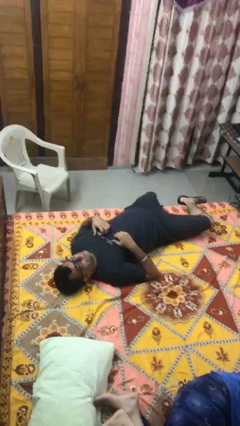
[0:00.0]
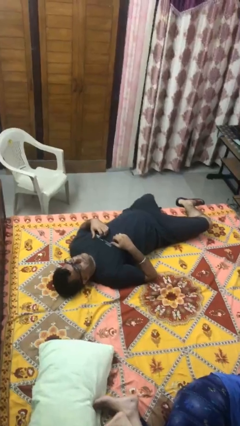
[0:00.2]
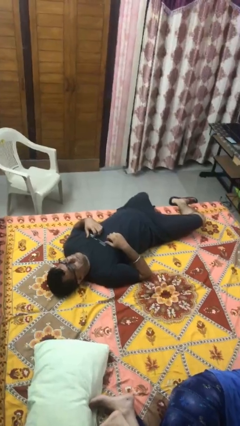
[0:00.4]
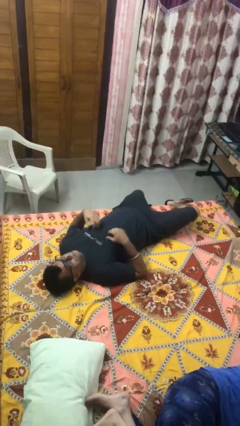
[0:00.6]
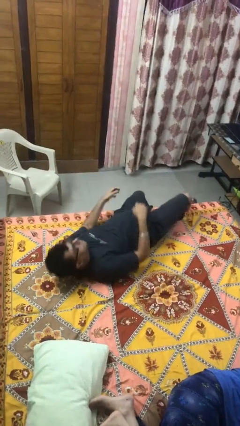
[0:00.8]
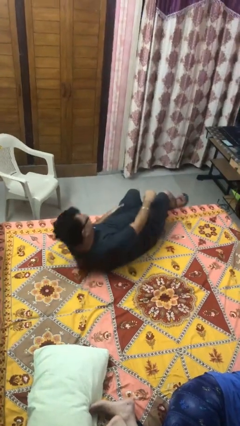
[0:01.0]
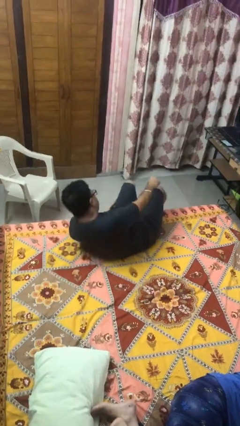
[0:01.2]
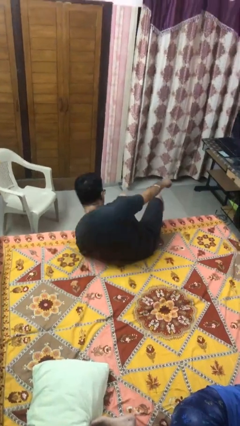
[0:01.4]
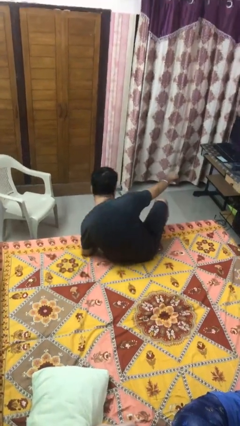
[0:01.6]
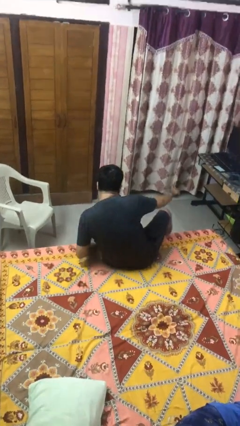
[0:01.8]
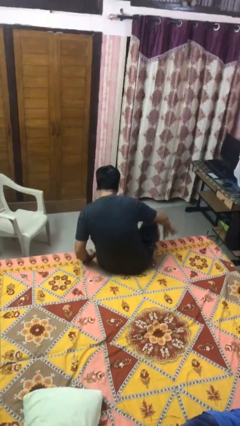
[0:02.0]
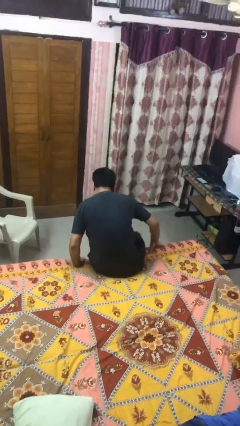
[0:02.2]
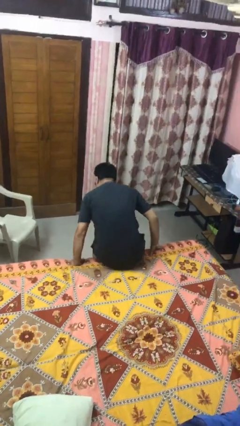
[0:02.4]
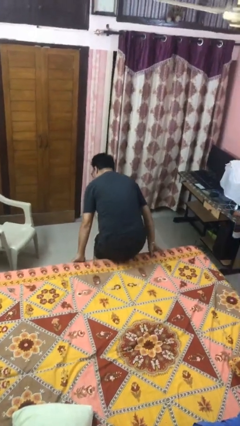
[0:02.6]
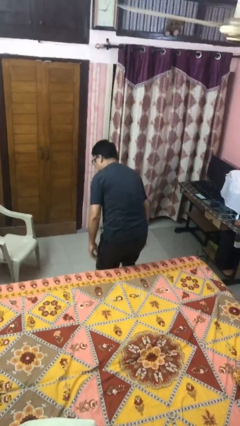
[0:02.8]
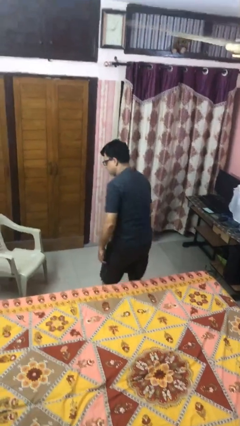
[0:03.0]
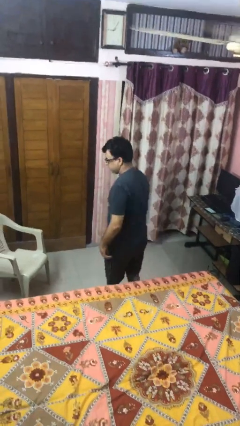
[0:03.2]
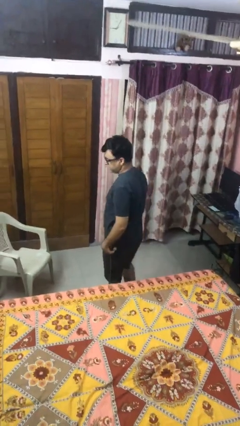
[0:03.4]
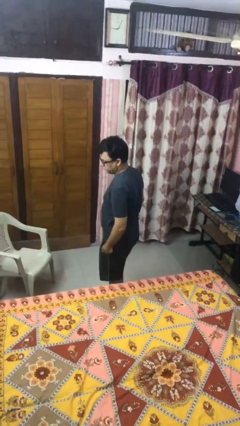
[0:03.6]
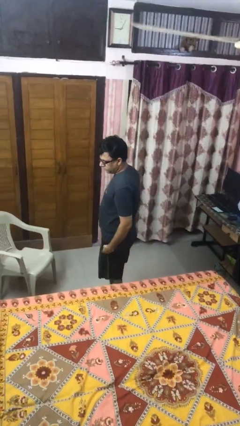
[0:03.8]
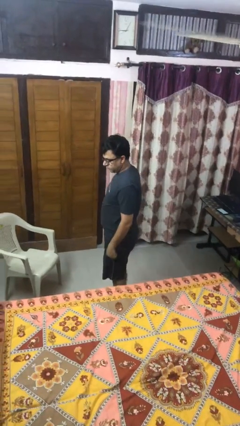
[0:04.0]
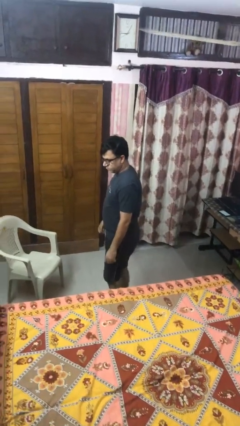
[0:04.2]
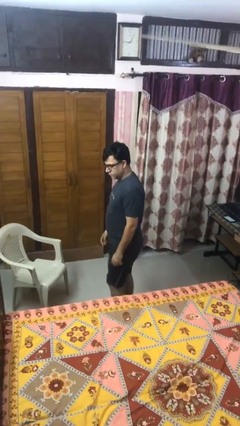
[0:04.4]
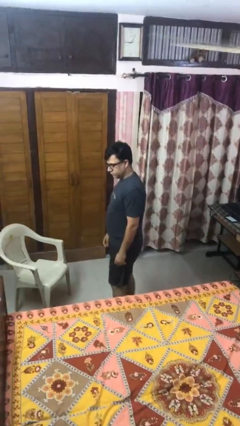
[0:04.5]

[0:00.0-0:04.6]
person stands up

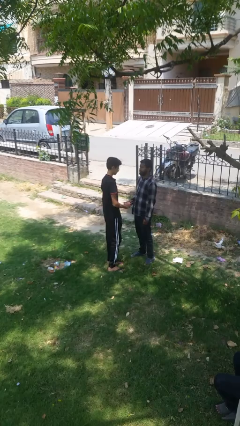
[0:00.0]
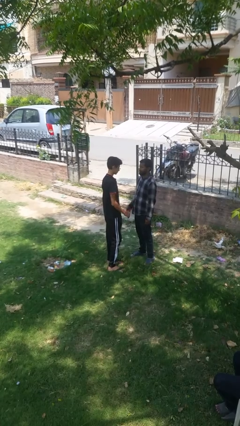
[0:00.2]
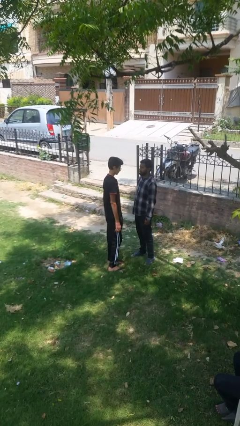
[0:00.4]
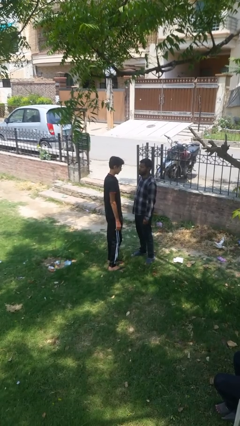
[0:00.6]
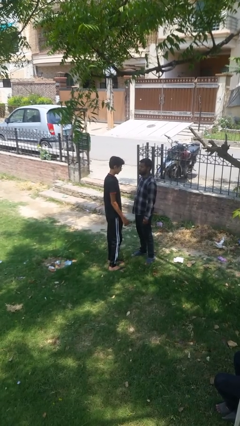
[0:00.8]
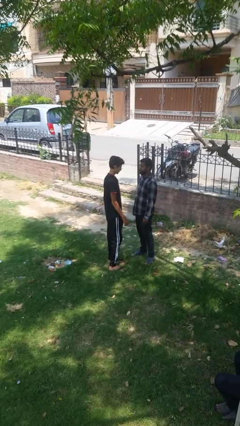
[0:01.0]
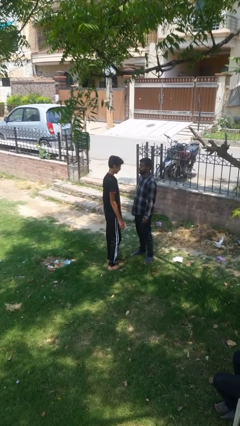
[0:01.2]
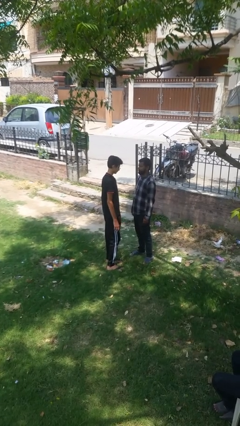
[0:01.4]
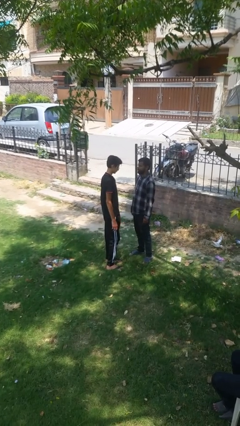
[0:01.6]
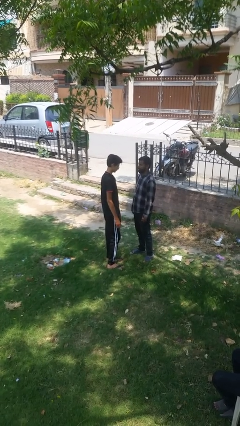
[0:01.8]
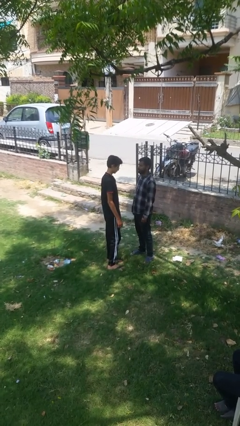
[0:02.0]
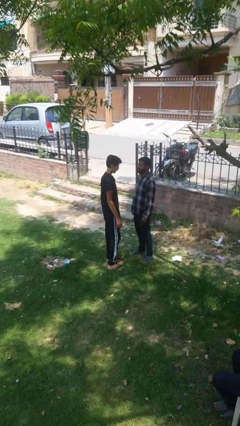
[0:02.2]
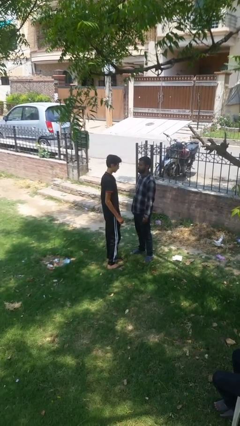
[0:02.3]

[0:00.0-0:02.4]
person highfives hand

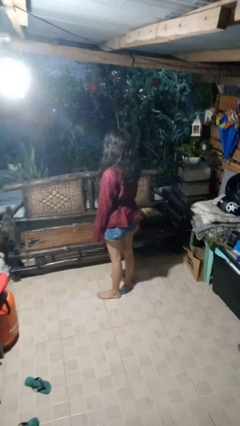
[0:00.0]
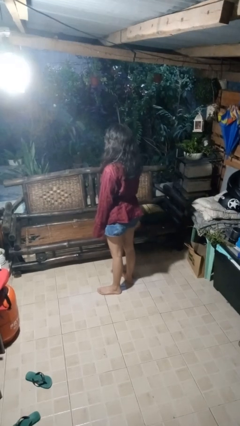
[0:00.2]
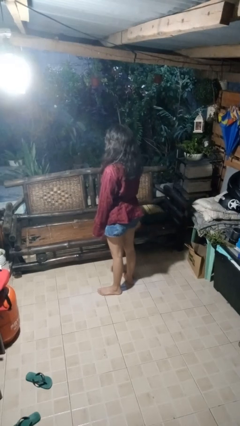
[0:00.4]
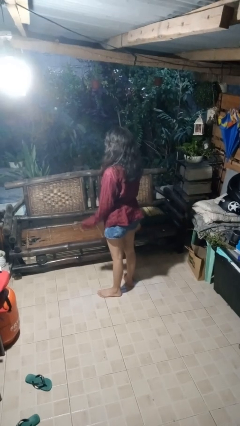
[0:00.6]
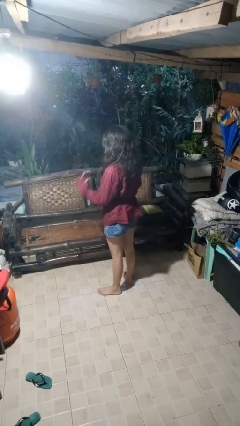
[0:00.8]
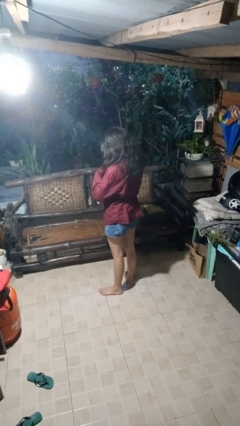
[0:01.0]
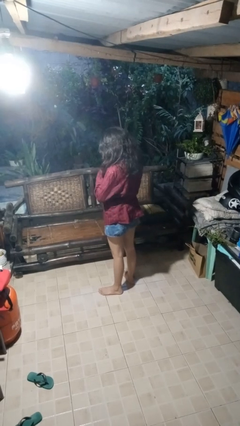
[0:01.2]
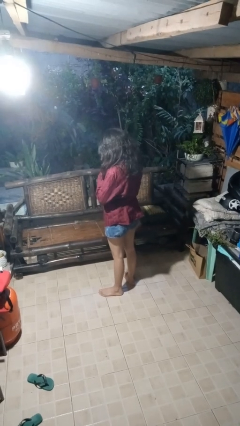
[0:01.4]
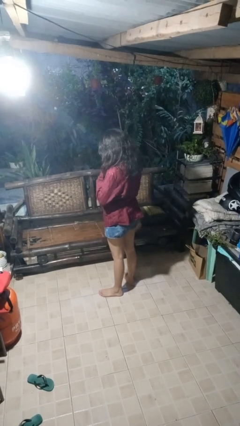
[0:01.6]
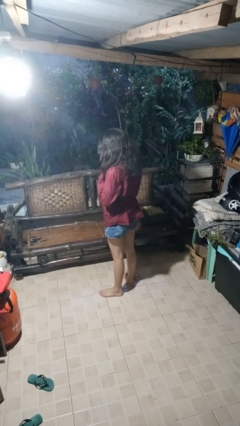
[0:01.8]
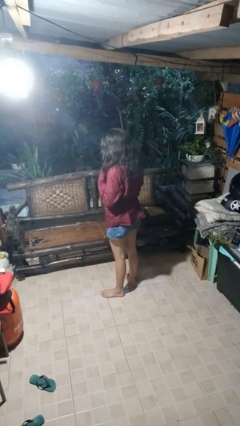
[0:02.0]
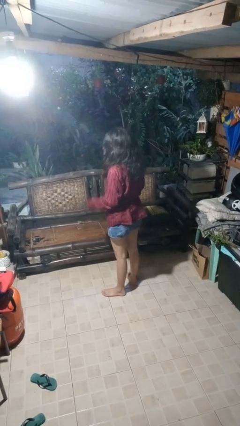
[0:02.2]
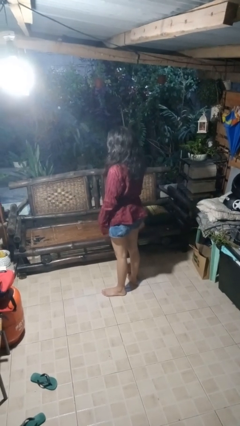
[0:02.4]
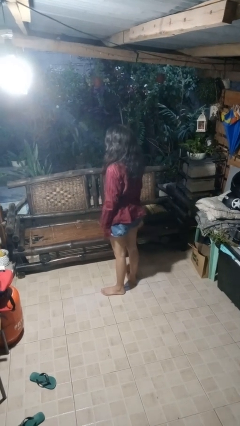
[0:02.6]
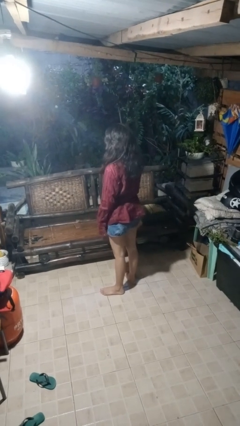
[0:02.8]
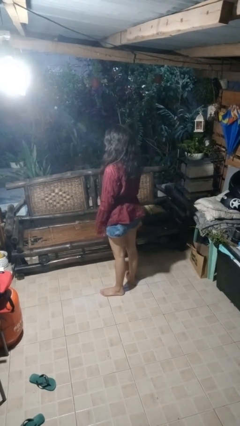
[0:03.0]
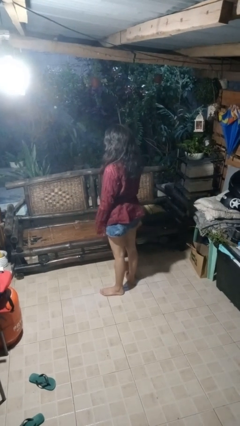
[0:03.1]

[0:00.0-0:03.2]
person unbuttons shirt

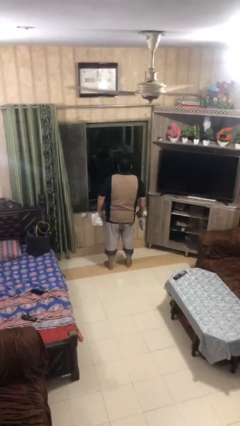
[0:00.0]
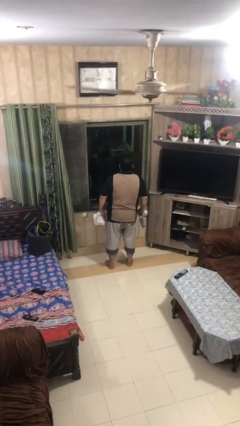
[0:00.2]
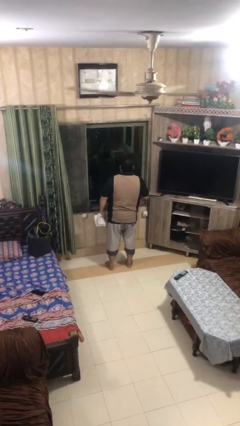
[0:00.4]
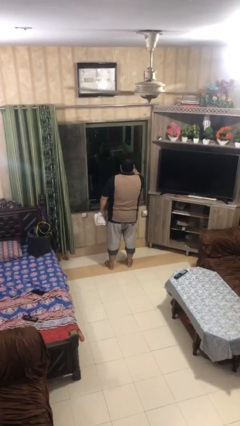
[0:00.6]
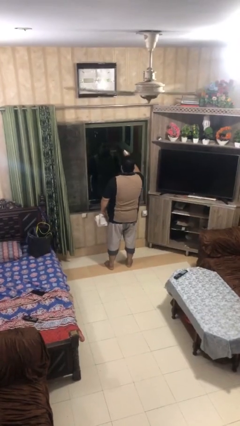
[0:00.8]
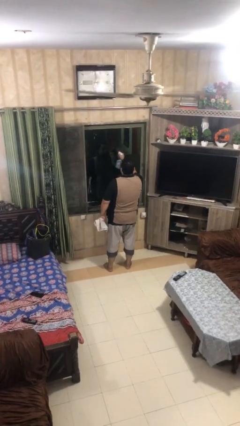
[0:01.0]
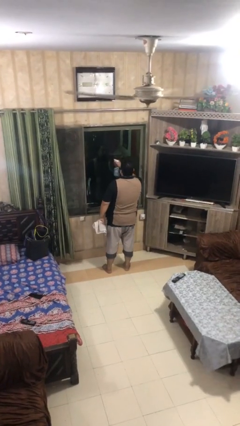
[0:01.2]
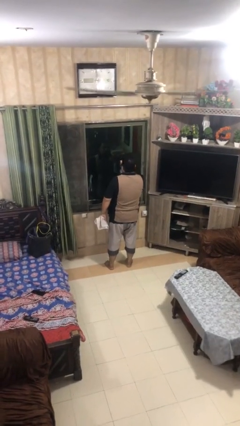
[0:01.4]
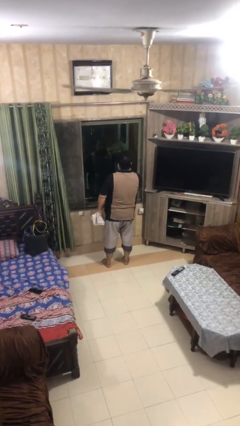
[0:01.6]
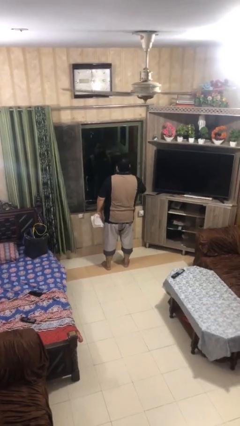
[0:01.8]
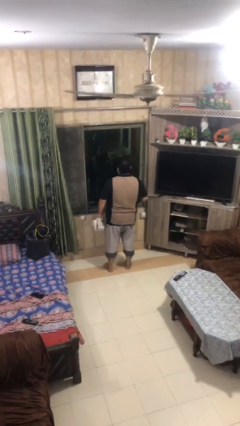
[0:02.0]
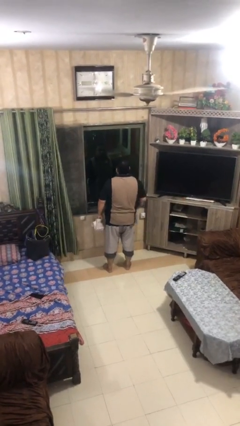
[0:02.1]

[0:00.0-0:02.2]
person sprays from bottle

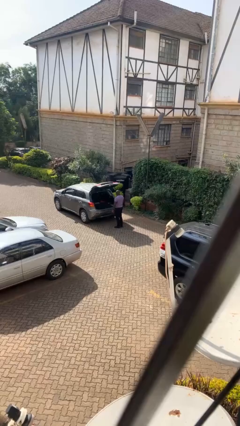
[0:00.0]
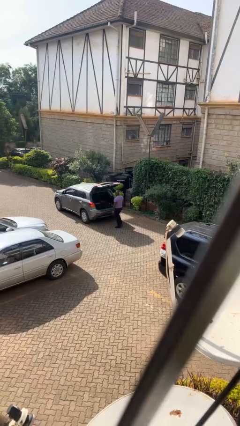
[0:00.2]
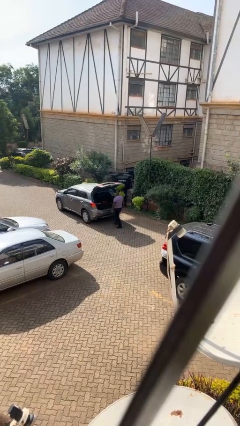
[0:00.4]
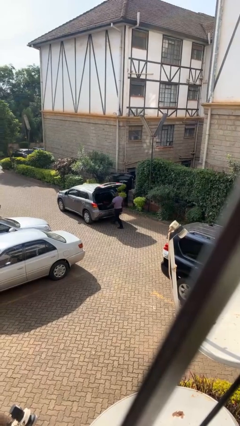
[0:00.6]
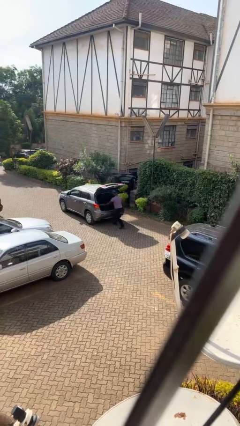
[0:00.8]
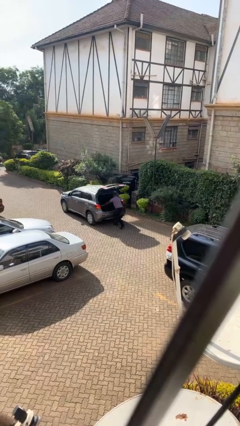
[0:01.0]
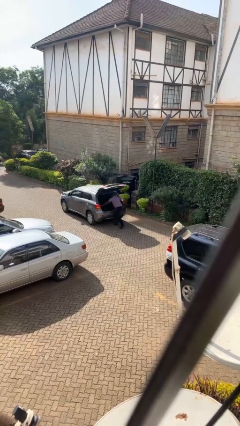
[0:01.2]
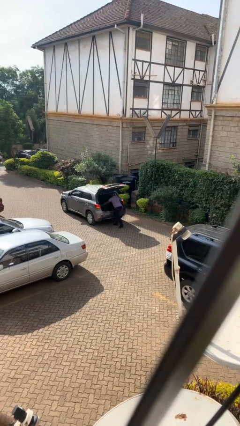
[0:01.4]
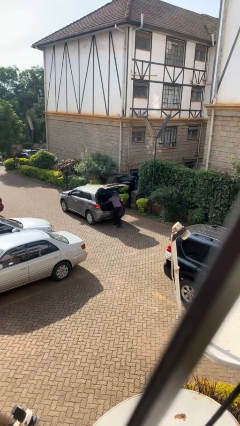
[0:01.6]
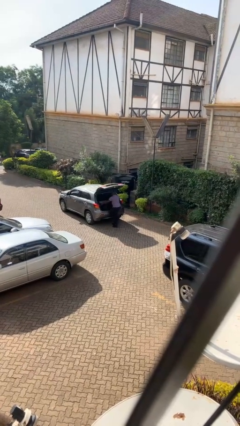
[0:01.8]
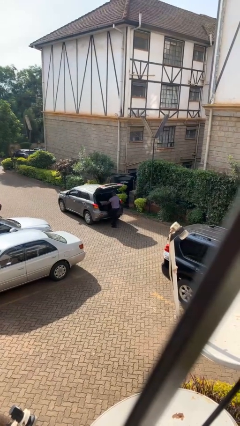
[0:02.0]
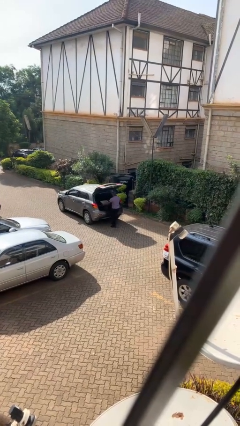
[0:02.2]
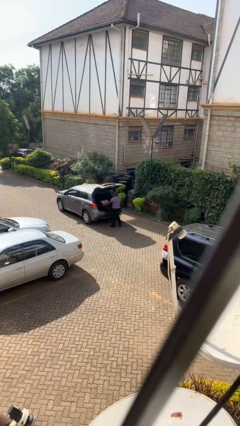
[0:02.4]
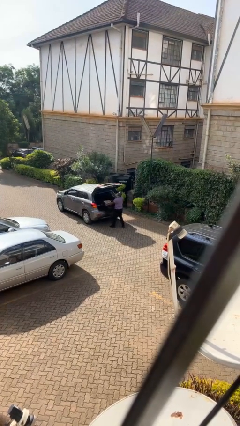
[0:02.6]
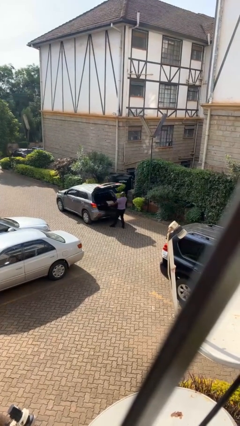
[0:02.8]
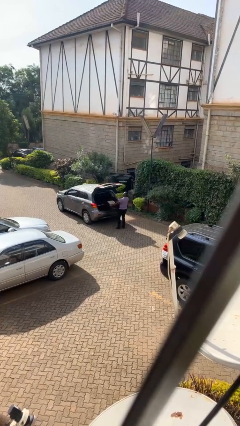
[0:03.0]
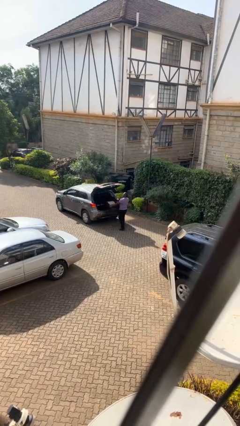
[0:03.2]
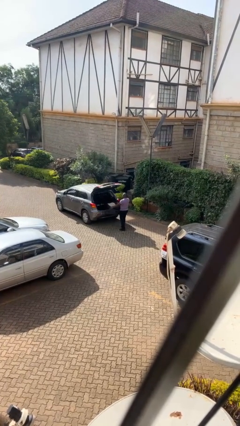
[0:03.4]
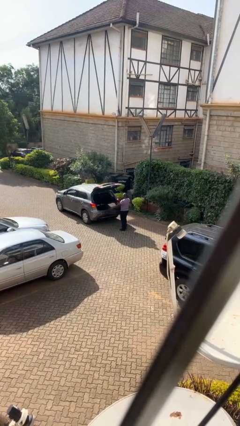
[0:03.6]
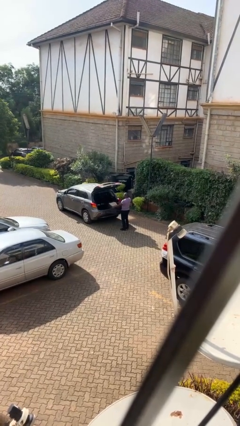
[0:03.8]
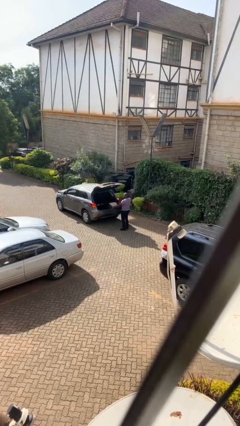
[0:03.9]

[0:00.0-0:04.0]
person unloads car

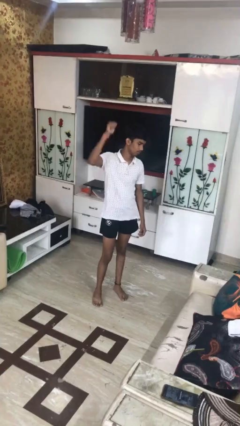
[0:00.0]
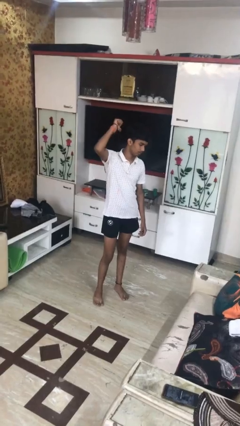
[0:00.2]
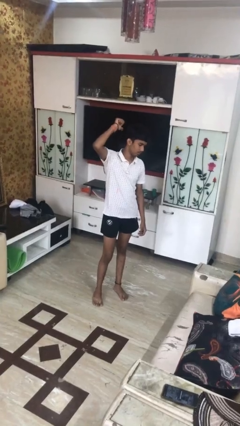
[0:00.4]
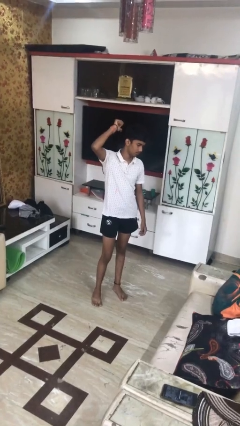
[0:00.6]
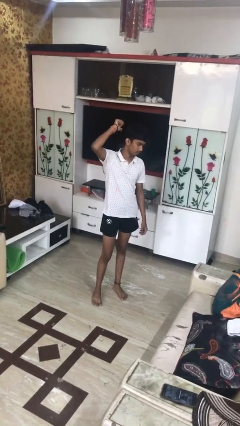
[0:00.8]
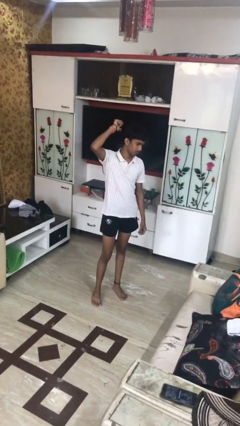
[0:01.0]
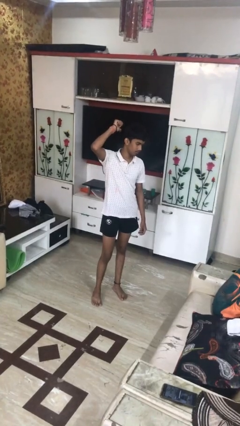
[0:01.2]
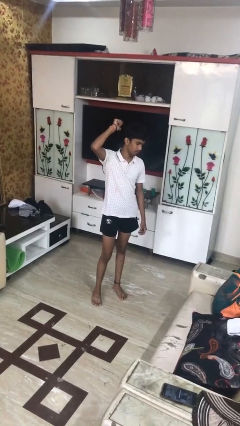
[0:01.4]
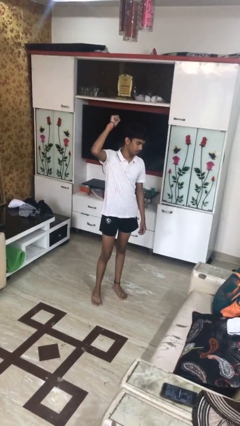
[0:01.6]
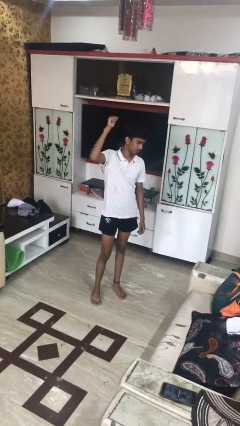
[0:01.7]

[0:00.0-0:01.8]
person gestures behind me
